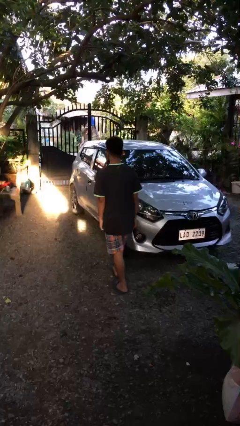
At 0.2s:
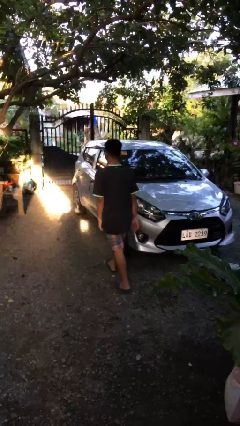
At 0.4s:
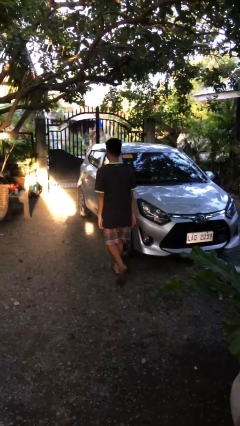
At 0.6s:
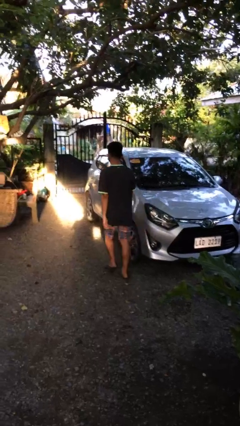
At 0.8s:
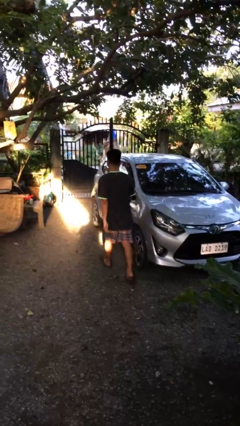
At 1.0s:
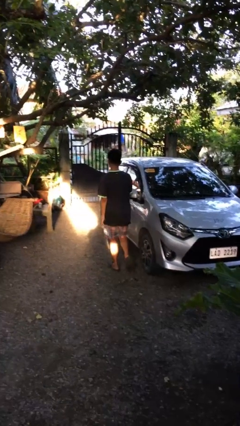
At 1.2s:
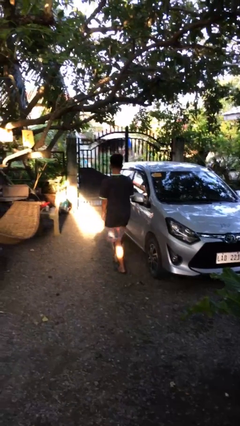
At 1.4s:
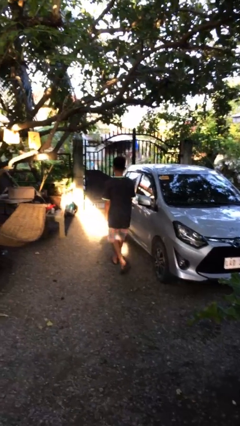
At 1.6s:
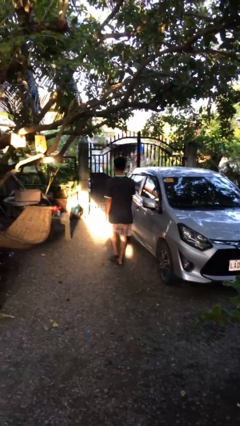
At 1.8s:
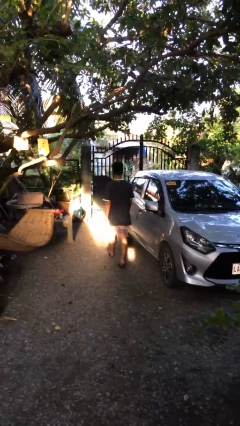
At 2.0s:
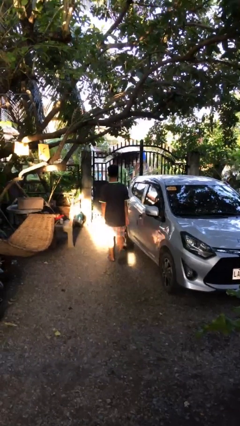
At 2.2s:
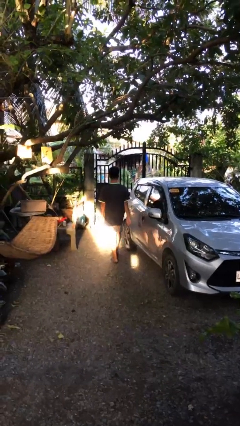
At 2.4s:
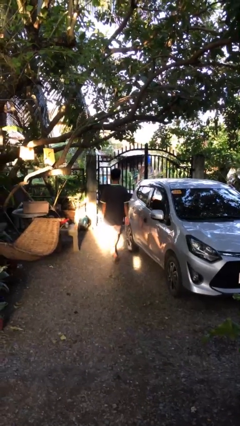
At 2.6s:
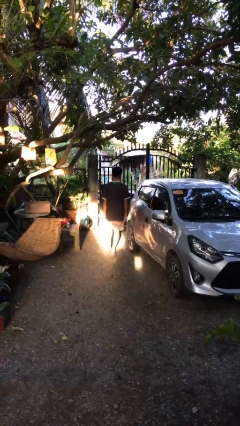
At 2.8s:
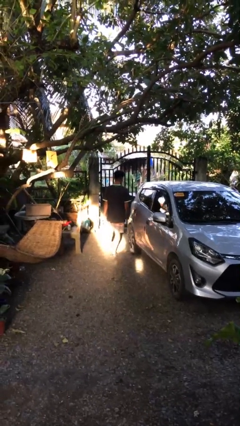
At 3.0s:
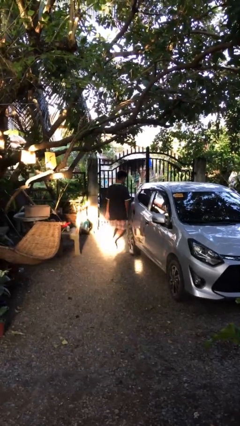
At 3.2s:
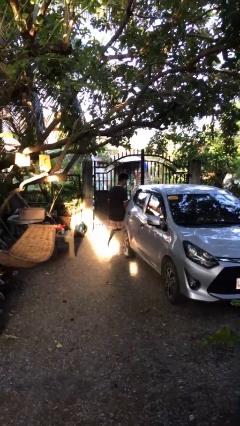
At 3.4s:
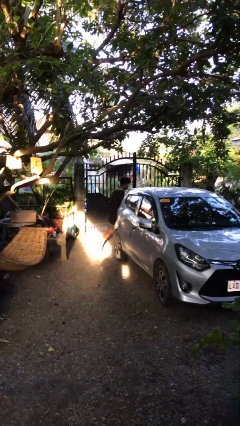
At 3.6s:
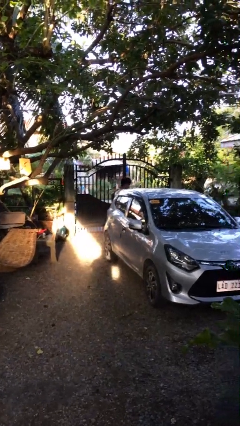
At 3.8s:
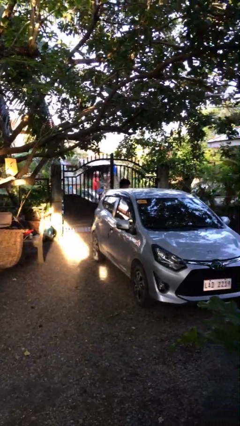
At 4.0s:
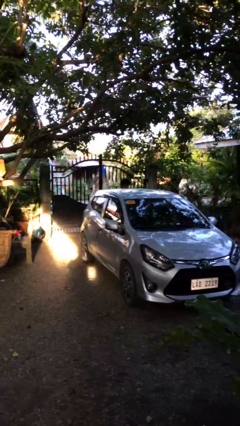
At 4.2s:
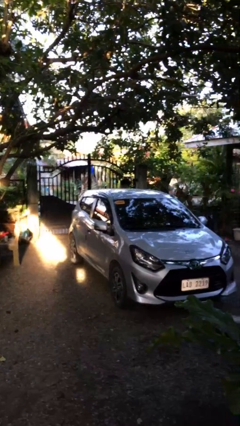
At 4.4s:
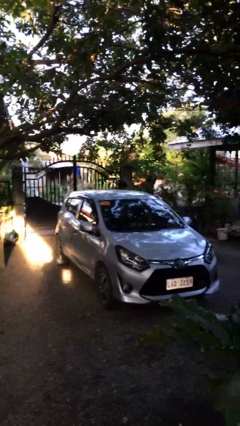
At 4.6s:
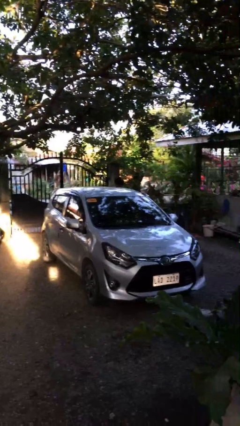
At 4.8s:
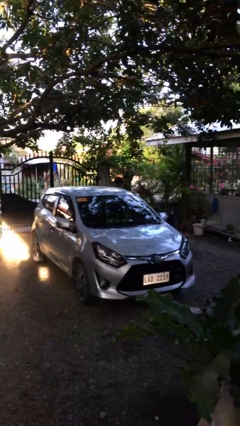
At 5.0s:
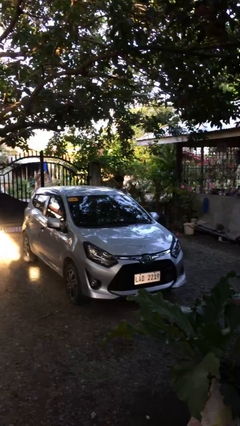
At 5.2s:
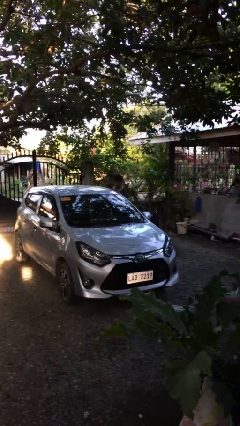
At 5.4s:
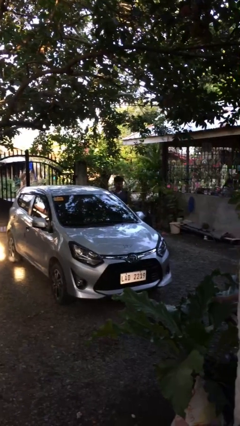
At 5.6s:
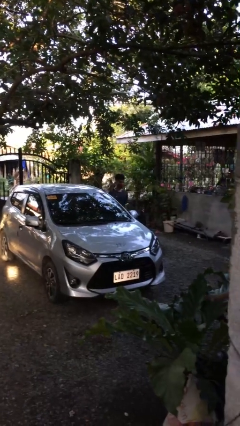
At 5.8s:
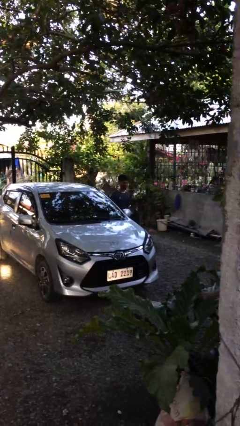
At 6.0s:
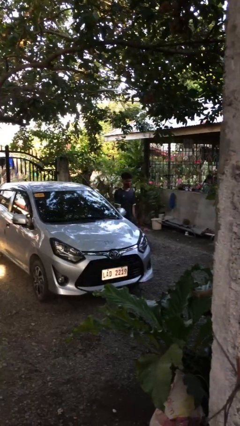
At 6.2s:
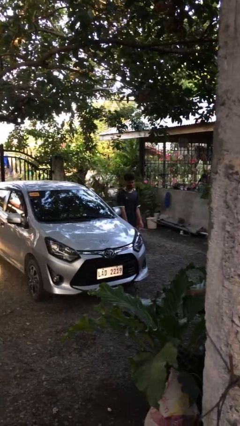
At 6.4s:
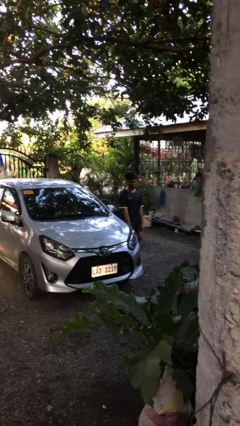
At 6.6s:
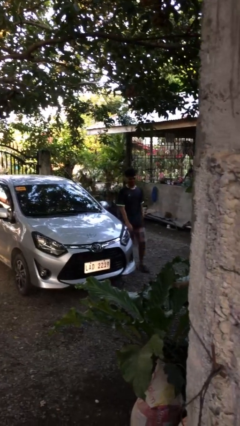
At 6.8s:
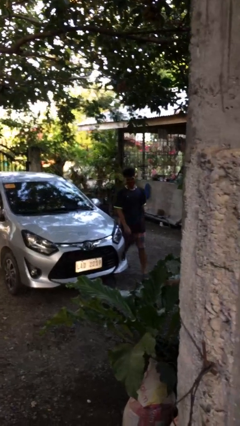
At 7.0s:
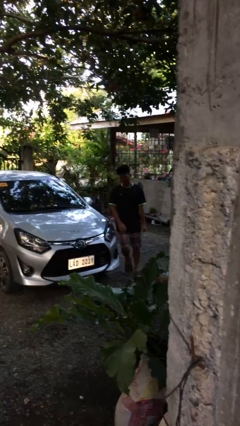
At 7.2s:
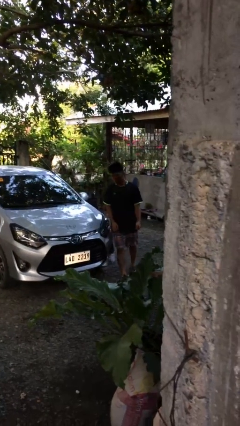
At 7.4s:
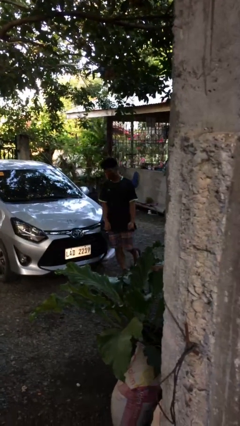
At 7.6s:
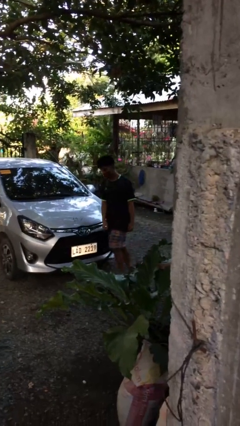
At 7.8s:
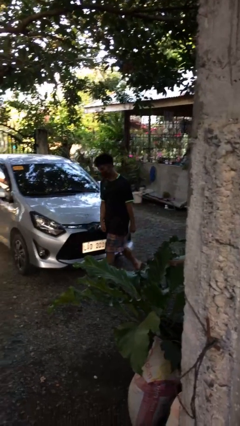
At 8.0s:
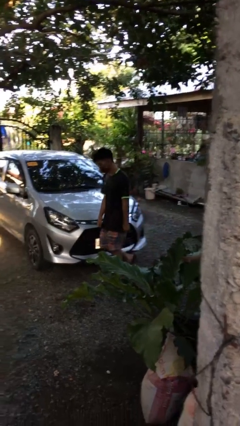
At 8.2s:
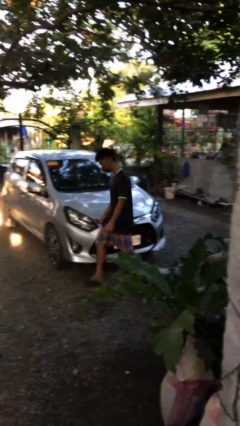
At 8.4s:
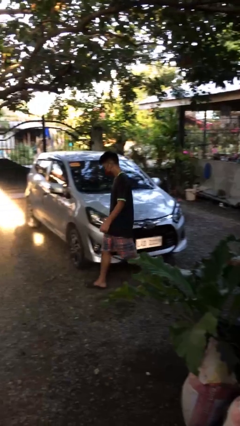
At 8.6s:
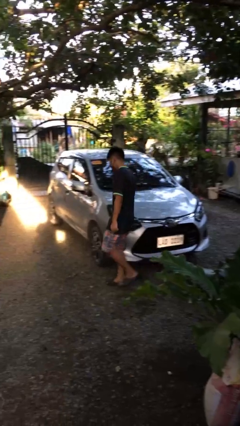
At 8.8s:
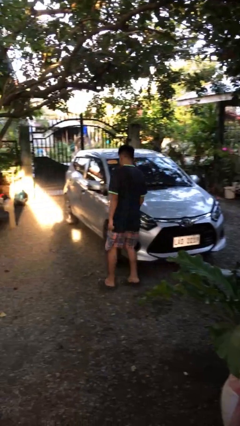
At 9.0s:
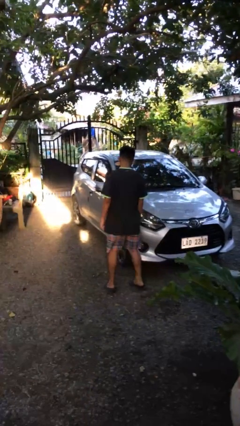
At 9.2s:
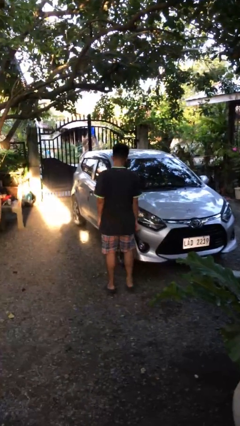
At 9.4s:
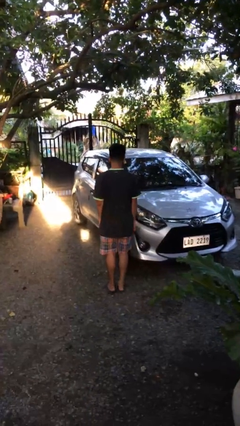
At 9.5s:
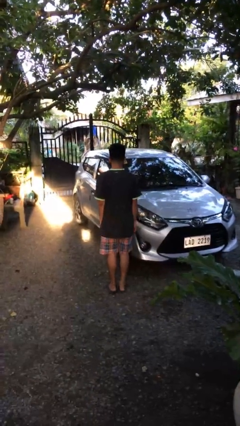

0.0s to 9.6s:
person walks around car

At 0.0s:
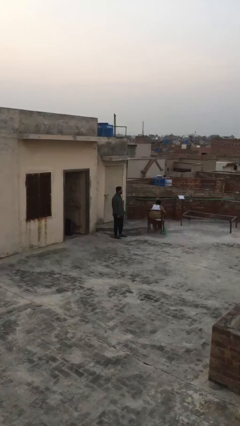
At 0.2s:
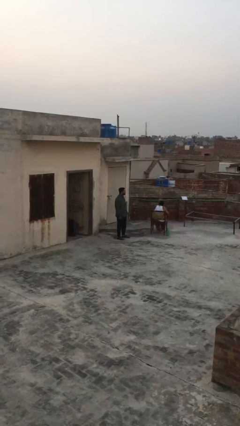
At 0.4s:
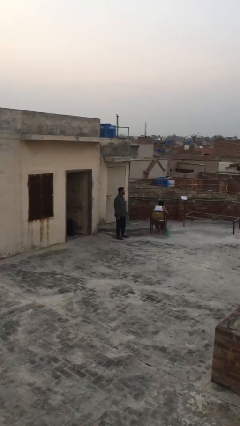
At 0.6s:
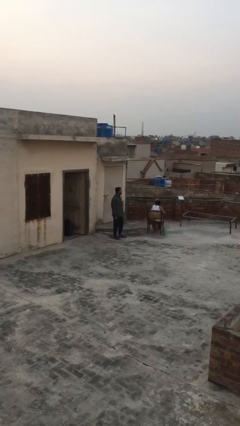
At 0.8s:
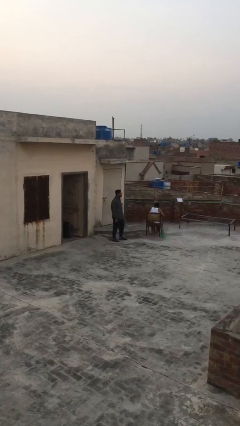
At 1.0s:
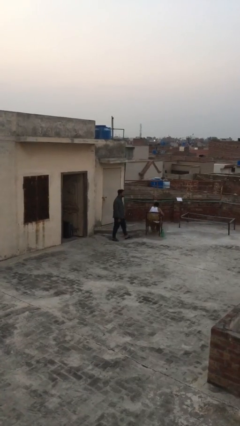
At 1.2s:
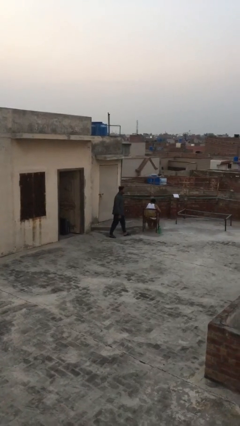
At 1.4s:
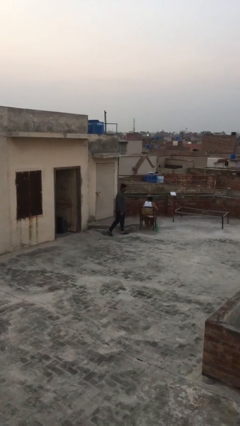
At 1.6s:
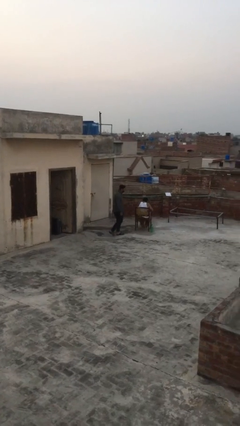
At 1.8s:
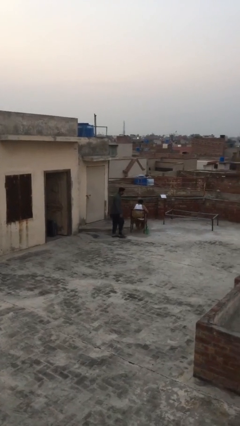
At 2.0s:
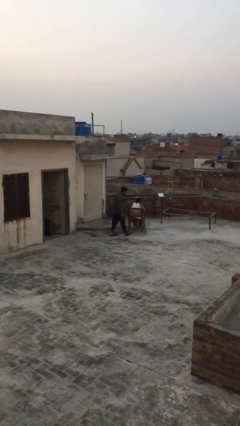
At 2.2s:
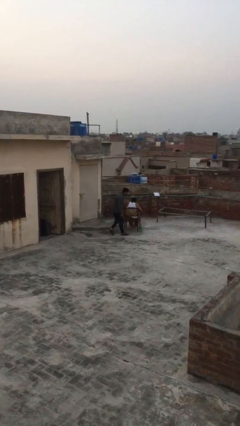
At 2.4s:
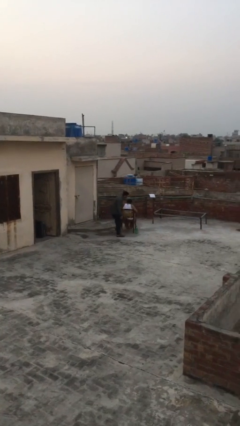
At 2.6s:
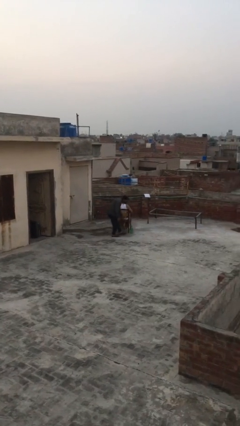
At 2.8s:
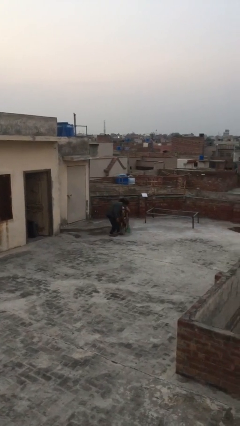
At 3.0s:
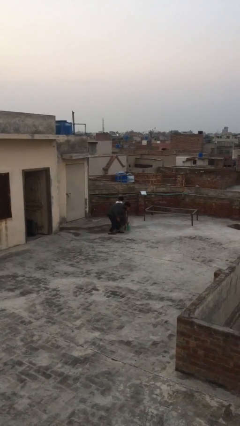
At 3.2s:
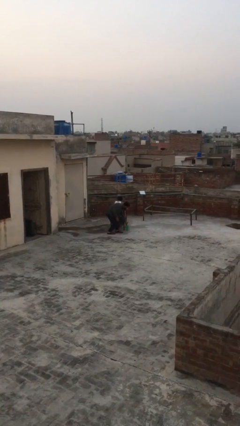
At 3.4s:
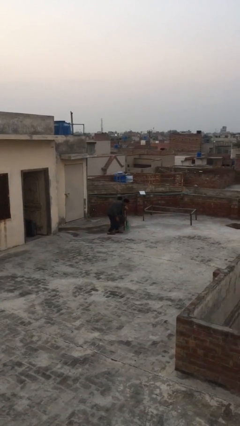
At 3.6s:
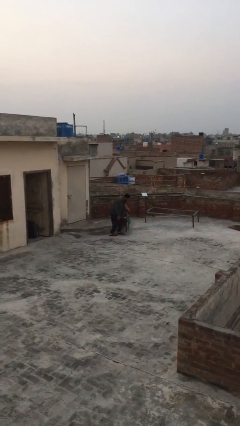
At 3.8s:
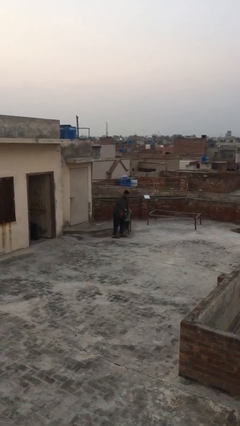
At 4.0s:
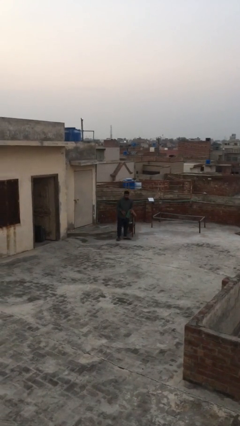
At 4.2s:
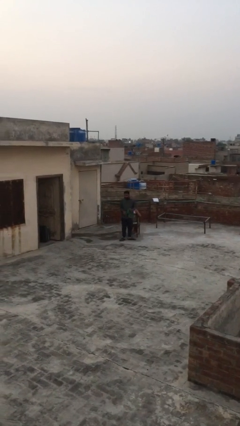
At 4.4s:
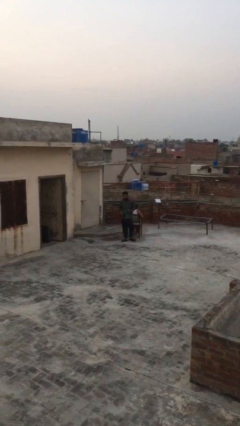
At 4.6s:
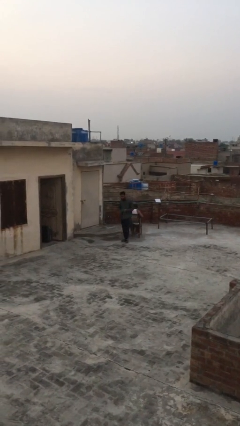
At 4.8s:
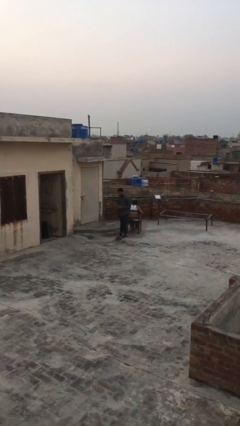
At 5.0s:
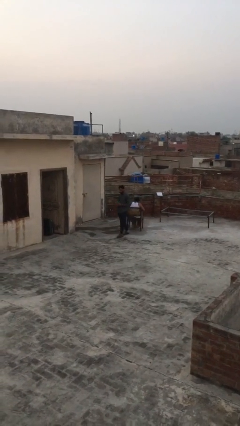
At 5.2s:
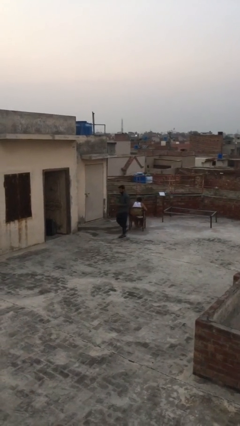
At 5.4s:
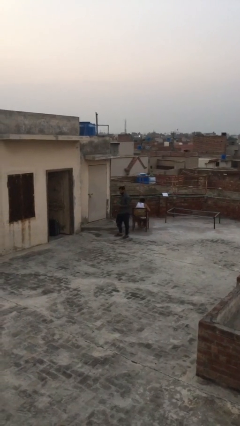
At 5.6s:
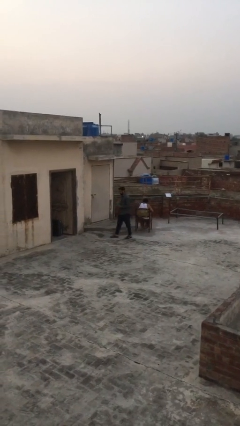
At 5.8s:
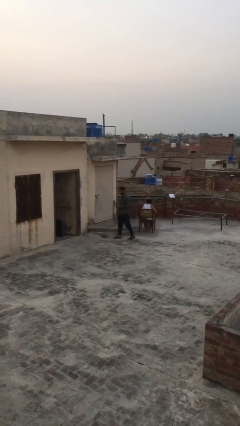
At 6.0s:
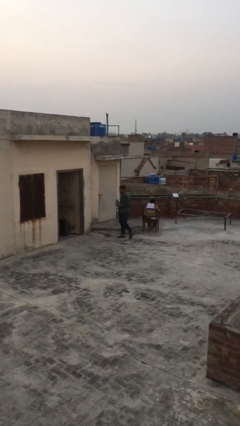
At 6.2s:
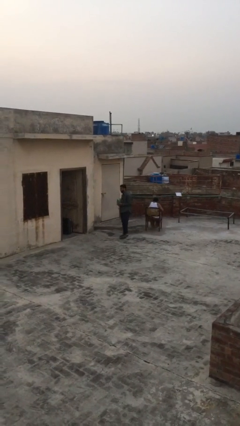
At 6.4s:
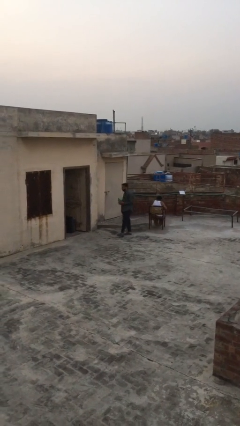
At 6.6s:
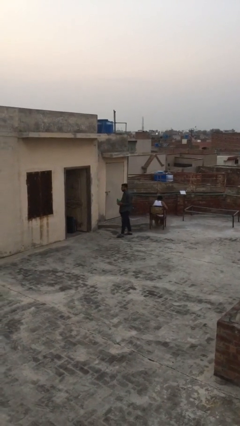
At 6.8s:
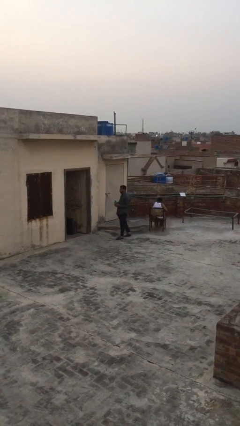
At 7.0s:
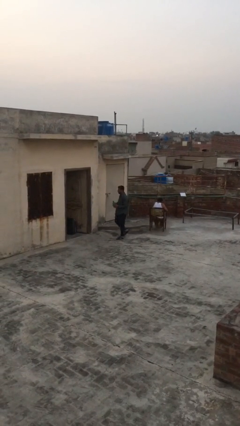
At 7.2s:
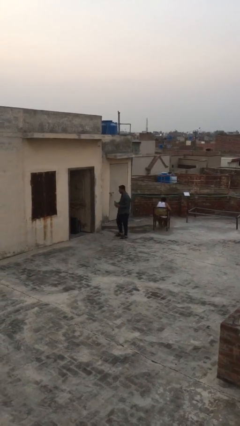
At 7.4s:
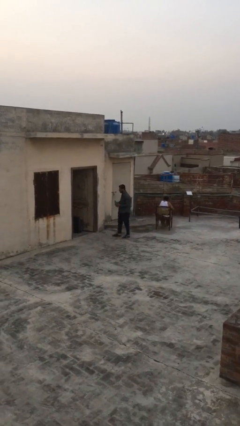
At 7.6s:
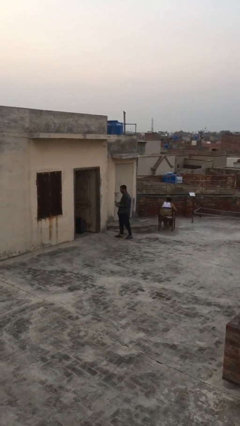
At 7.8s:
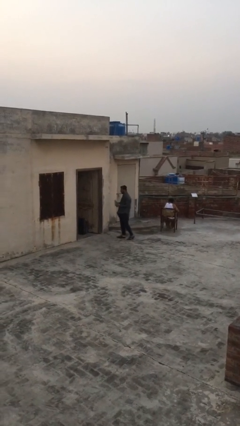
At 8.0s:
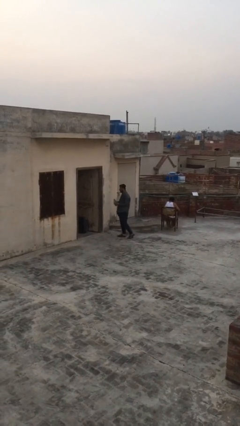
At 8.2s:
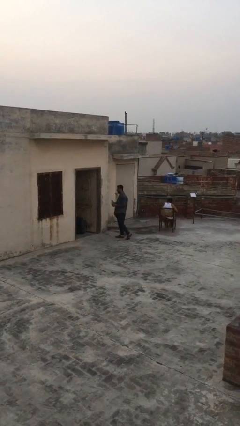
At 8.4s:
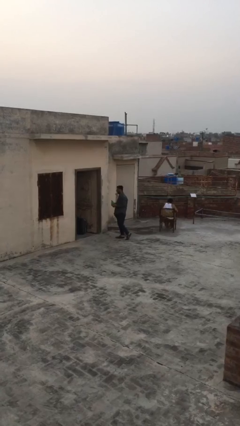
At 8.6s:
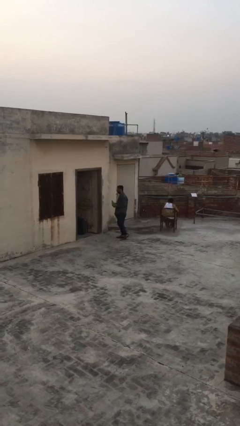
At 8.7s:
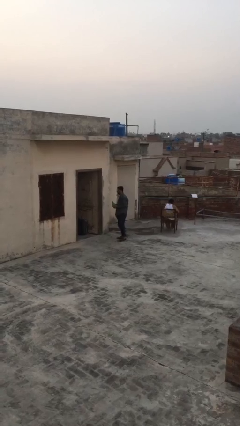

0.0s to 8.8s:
person steals object from person
